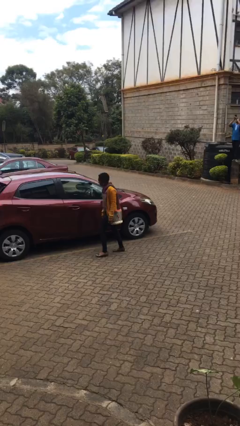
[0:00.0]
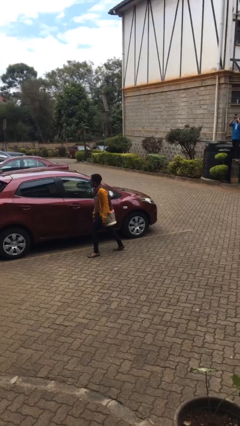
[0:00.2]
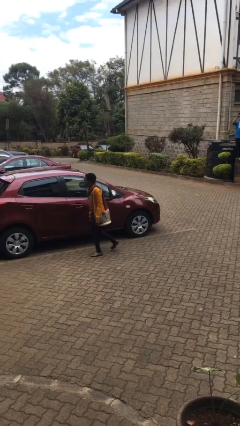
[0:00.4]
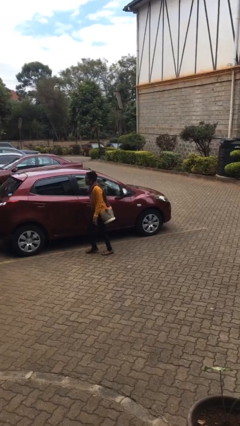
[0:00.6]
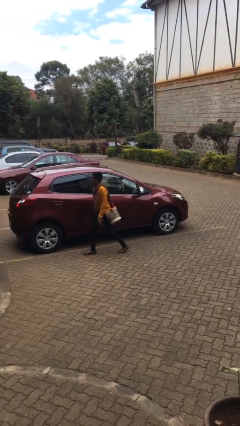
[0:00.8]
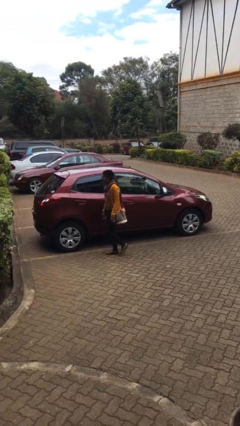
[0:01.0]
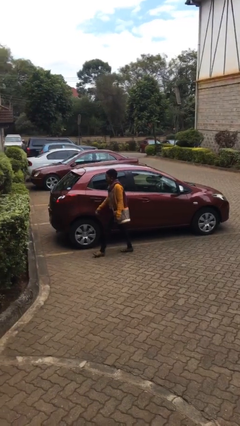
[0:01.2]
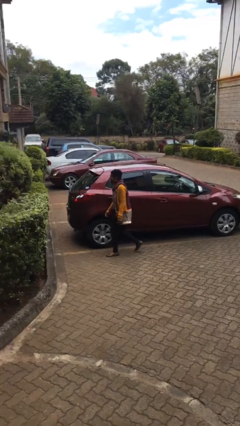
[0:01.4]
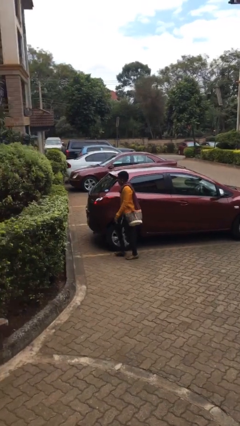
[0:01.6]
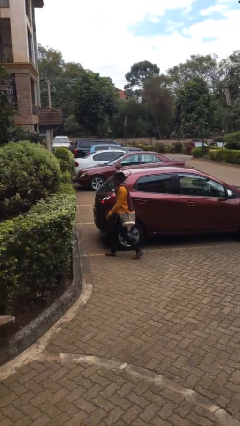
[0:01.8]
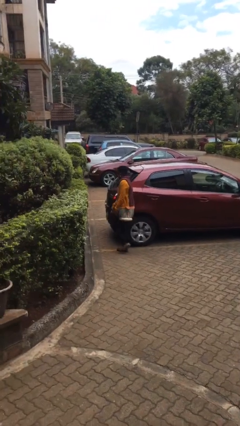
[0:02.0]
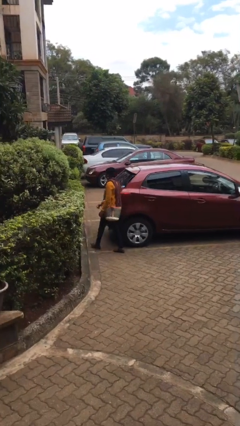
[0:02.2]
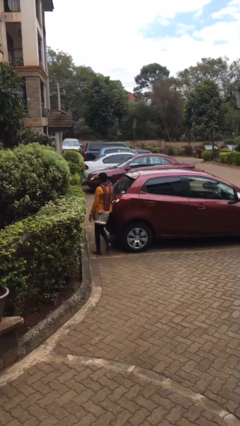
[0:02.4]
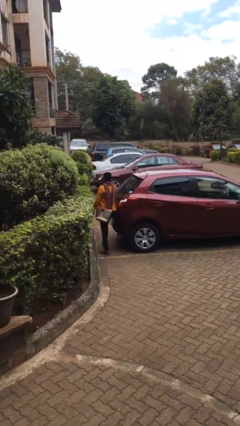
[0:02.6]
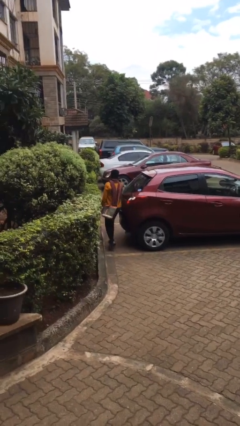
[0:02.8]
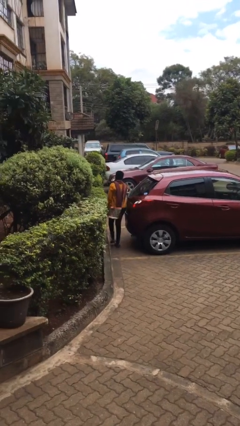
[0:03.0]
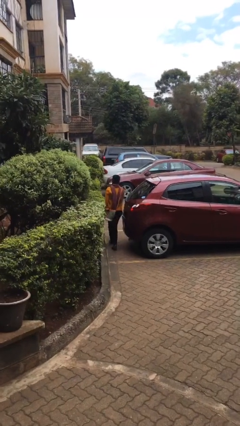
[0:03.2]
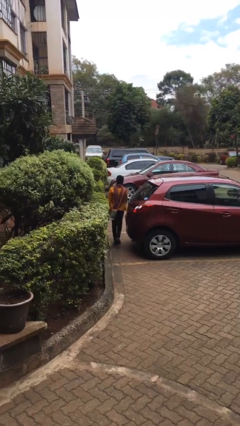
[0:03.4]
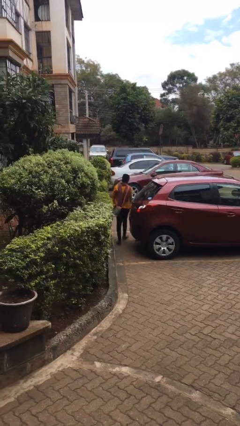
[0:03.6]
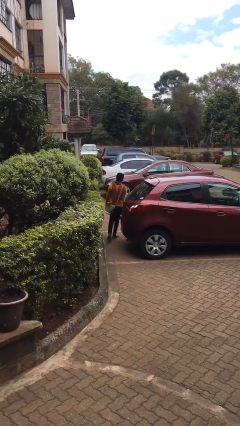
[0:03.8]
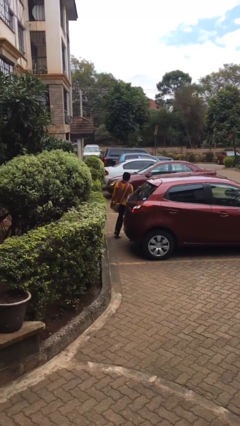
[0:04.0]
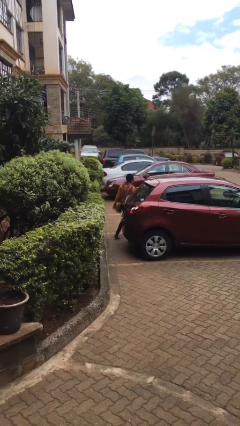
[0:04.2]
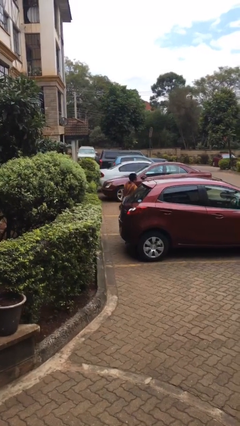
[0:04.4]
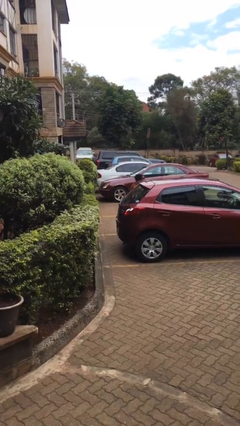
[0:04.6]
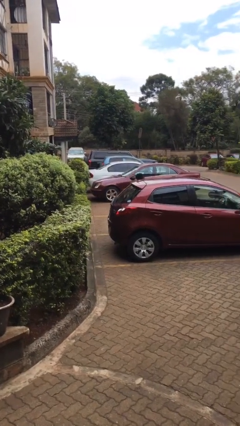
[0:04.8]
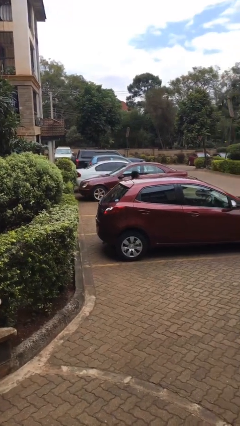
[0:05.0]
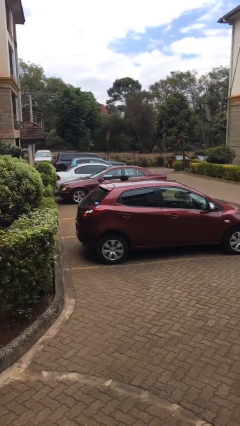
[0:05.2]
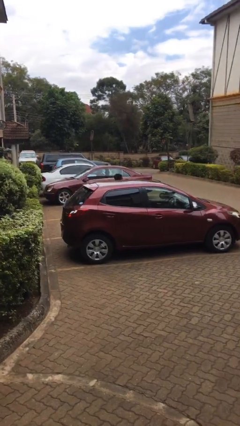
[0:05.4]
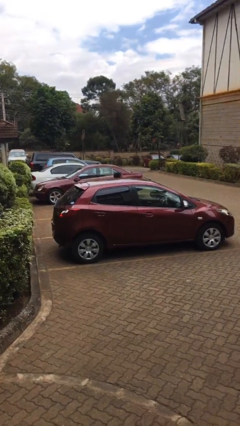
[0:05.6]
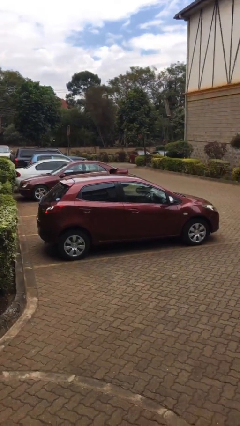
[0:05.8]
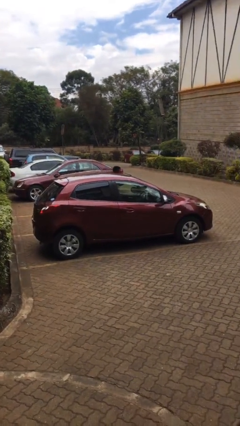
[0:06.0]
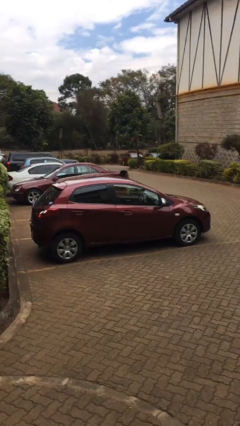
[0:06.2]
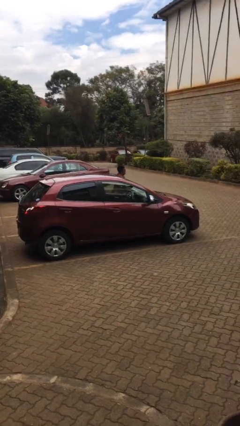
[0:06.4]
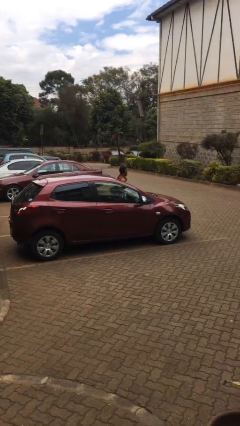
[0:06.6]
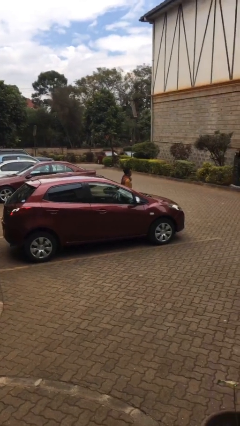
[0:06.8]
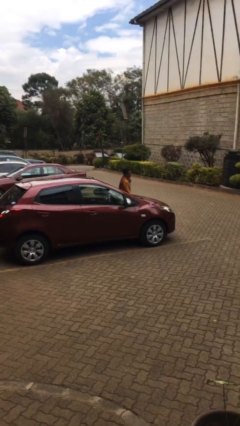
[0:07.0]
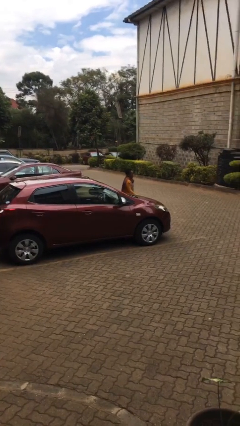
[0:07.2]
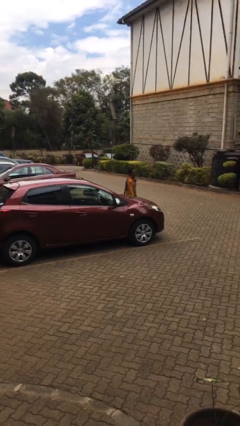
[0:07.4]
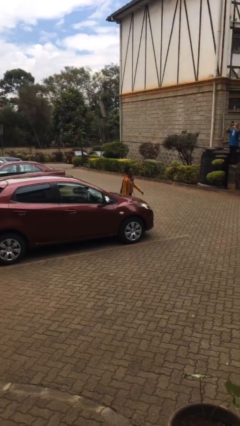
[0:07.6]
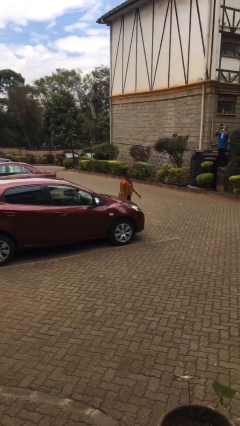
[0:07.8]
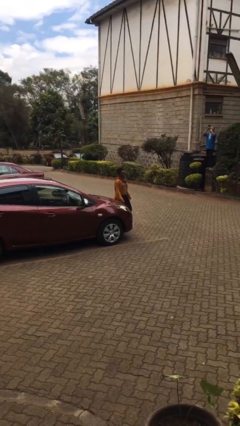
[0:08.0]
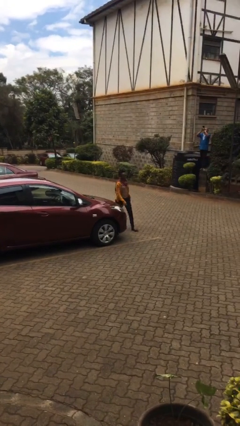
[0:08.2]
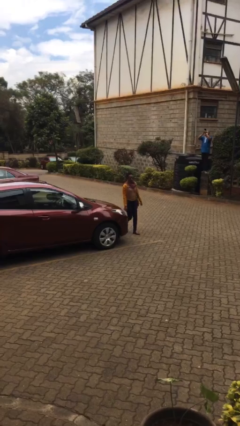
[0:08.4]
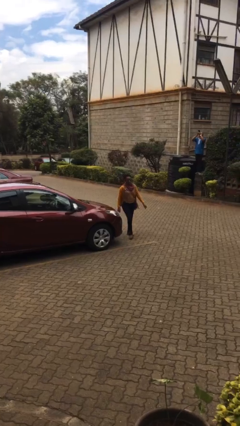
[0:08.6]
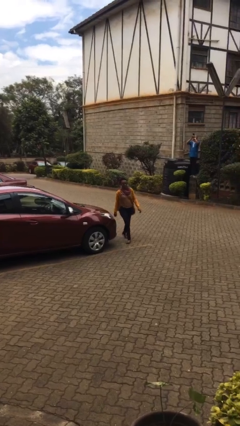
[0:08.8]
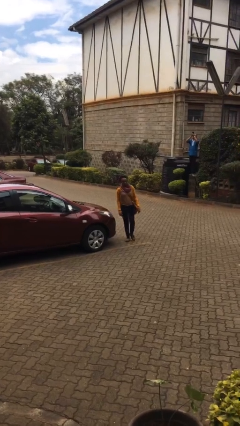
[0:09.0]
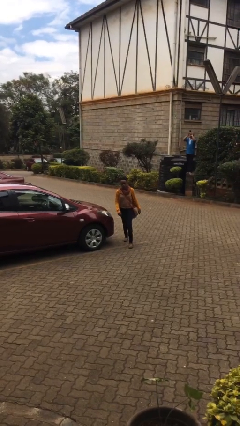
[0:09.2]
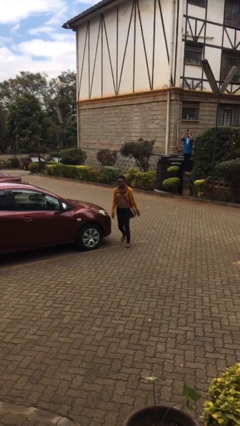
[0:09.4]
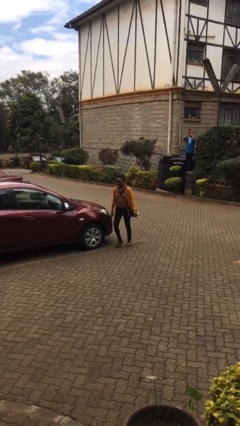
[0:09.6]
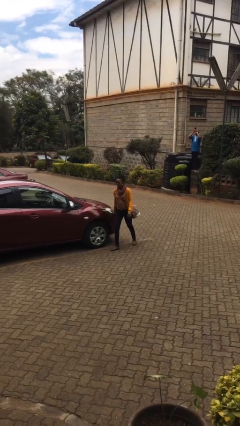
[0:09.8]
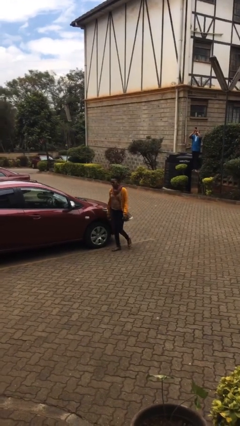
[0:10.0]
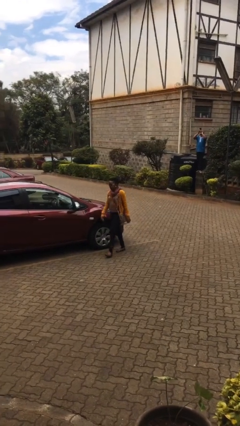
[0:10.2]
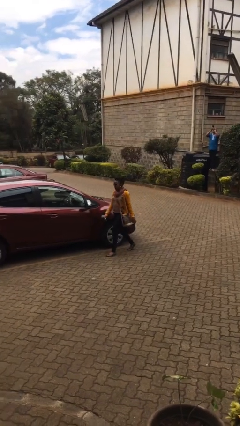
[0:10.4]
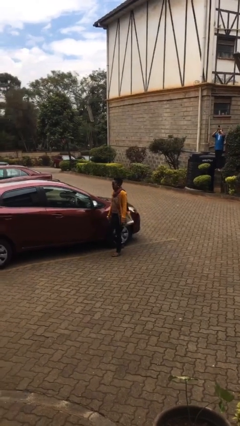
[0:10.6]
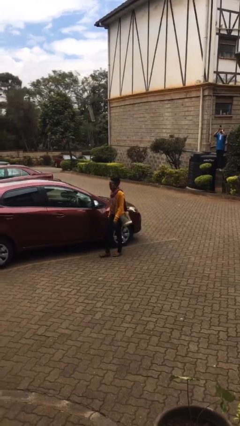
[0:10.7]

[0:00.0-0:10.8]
person walks around car

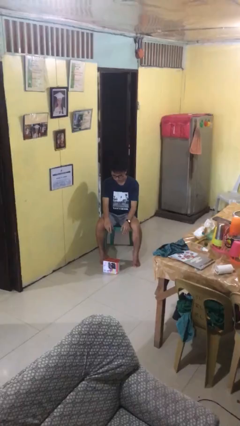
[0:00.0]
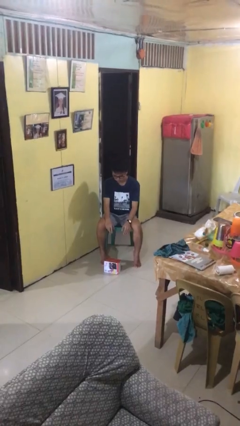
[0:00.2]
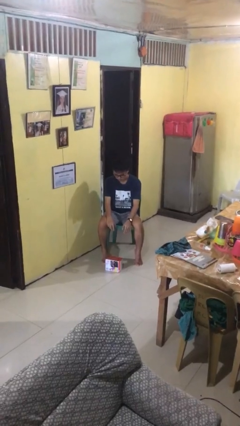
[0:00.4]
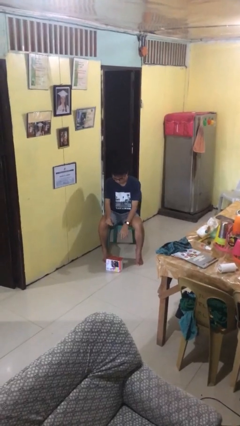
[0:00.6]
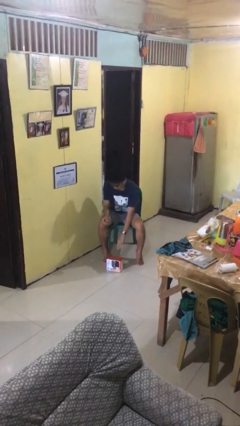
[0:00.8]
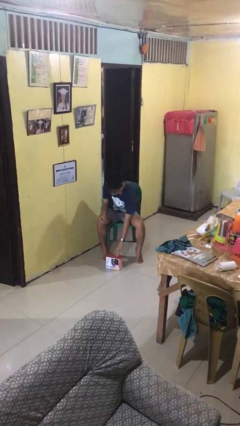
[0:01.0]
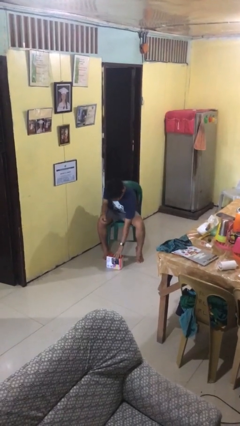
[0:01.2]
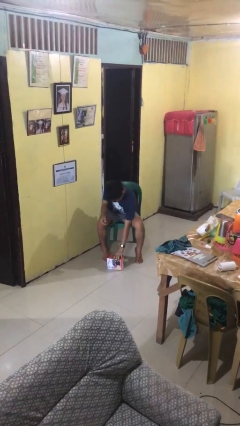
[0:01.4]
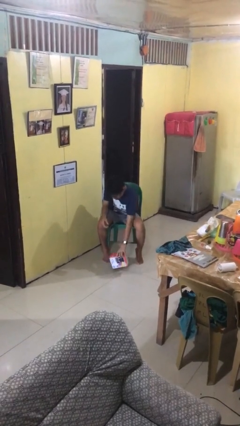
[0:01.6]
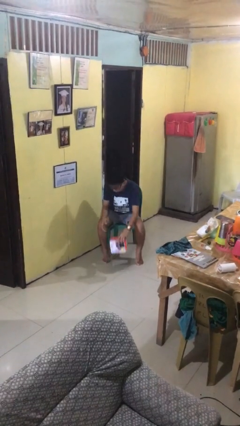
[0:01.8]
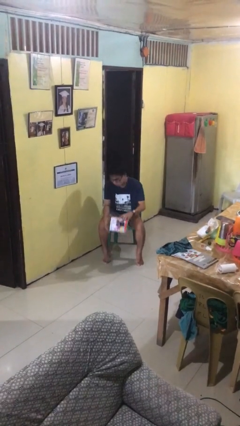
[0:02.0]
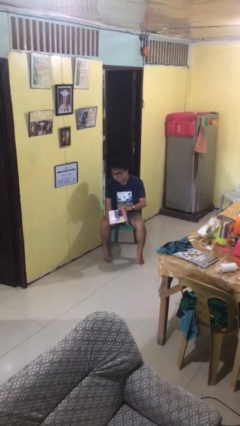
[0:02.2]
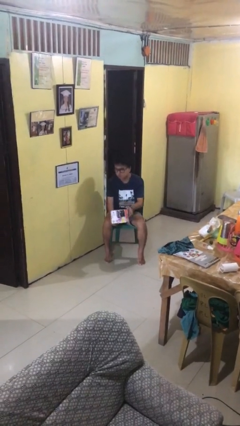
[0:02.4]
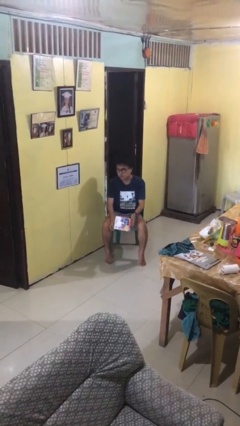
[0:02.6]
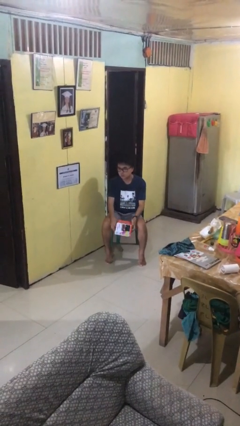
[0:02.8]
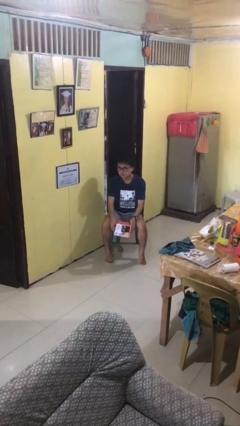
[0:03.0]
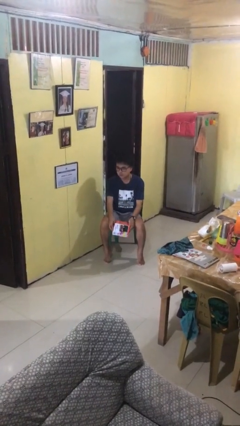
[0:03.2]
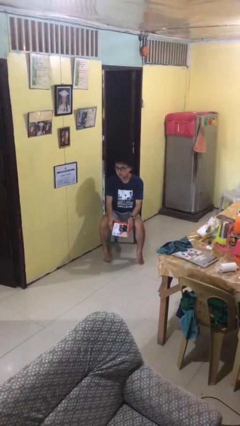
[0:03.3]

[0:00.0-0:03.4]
person picks up object from floor

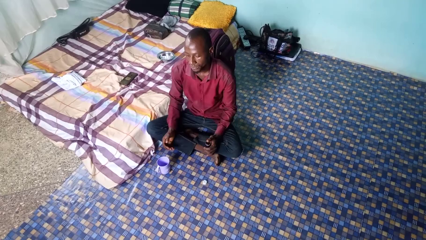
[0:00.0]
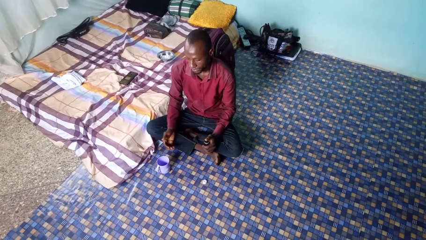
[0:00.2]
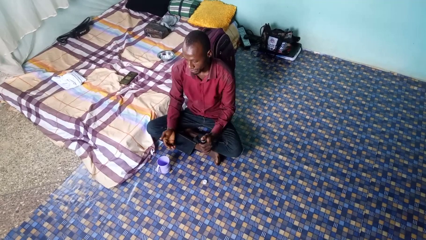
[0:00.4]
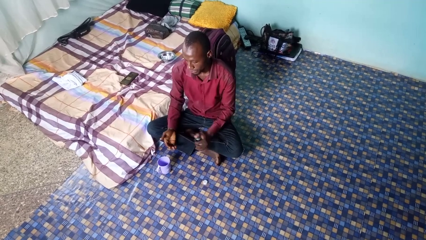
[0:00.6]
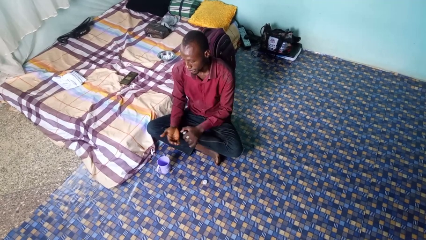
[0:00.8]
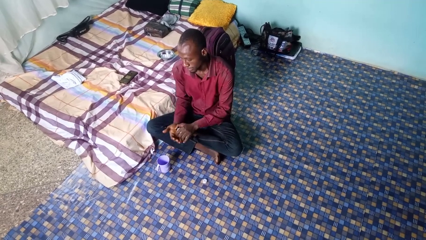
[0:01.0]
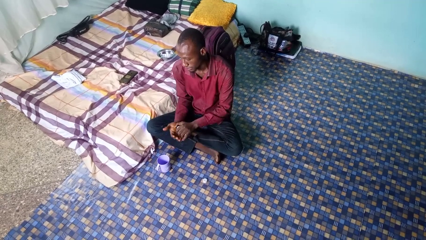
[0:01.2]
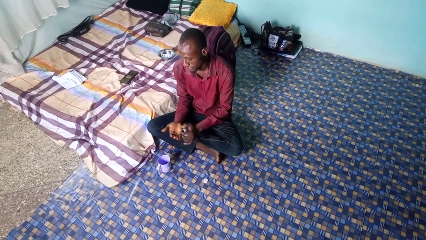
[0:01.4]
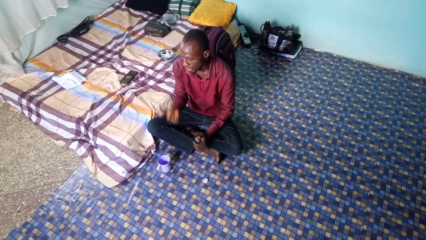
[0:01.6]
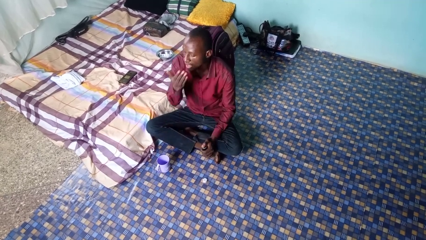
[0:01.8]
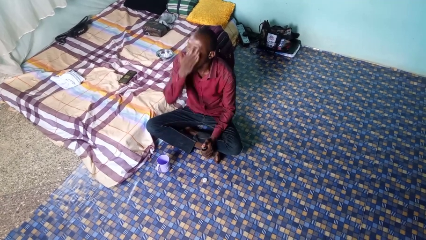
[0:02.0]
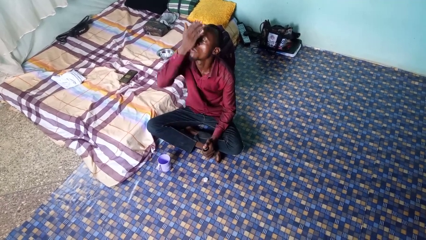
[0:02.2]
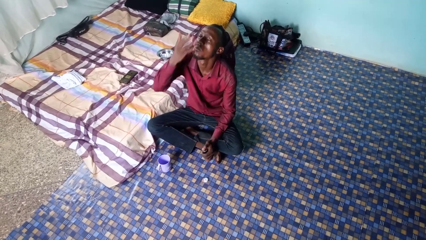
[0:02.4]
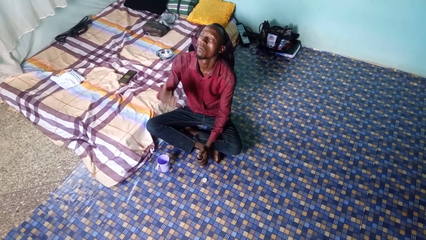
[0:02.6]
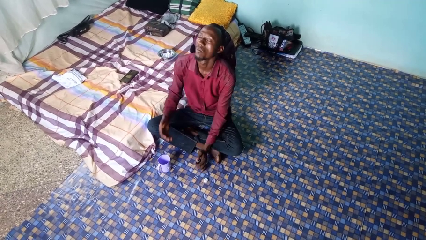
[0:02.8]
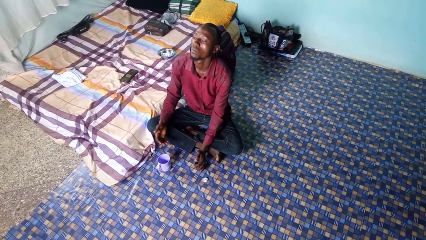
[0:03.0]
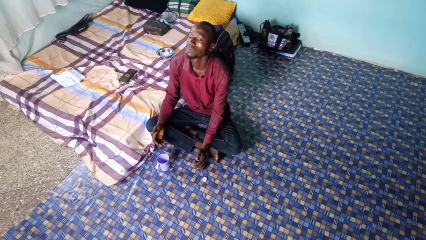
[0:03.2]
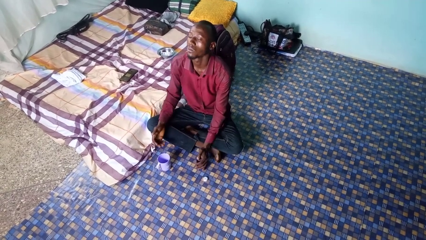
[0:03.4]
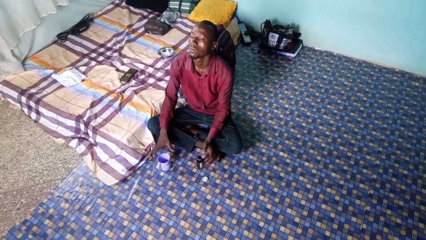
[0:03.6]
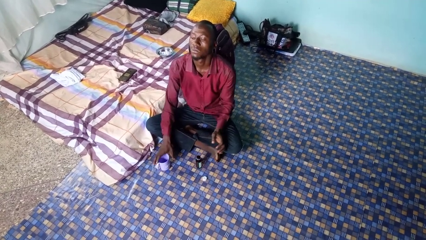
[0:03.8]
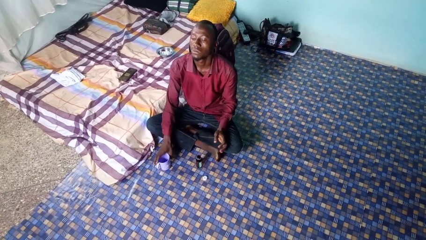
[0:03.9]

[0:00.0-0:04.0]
person takes medicine pills
